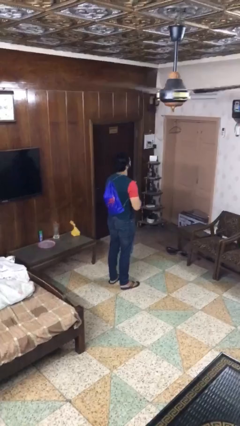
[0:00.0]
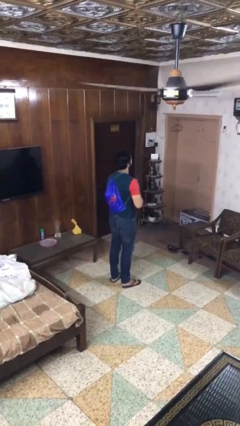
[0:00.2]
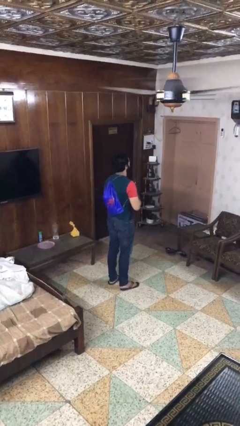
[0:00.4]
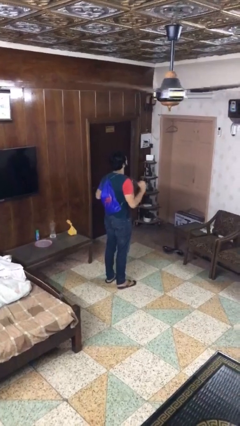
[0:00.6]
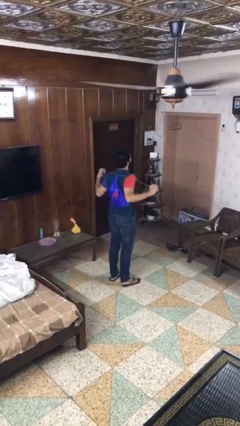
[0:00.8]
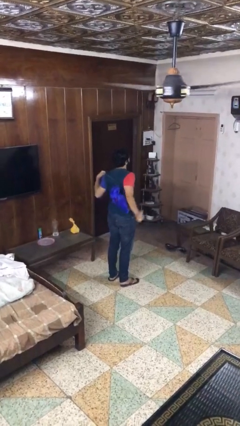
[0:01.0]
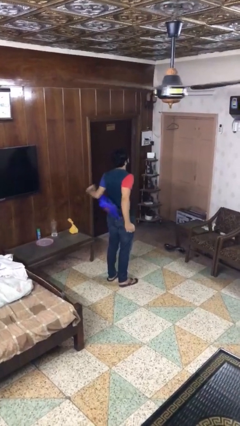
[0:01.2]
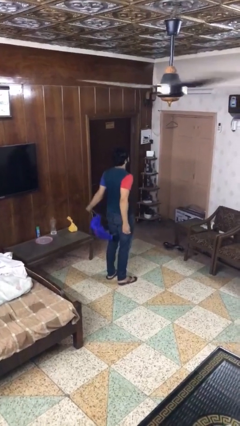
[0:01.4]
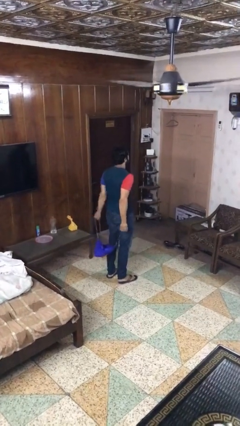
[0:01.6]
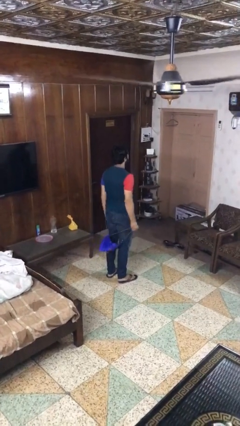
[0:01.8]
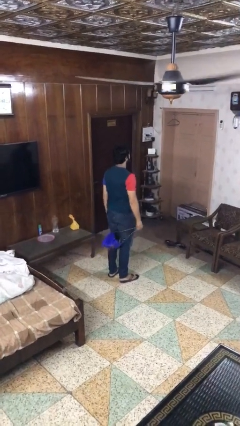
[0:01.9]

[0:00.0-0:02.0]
person takes off backpack

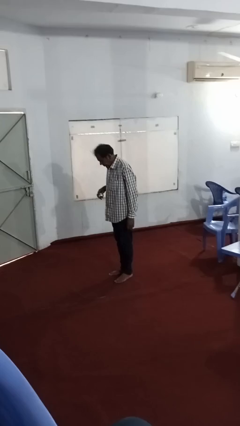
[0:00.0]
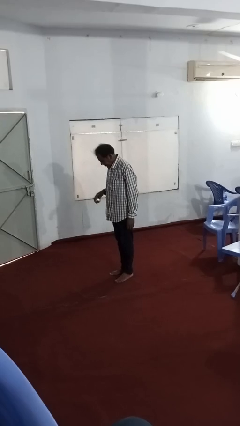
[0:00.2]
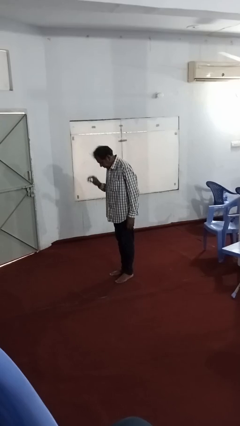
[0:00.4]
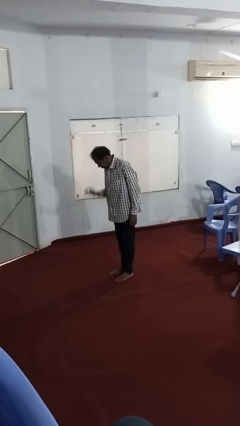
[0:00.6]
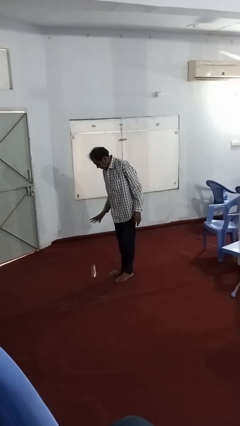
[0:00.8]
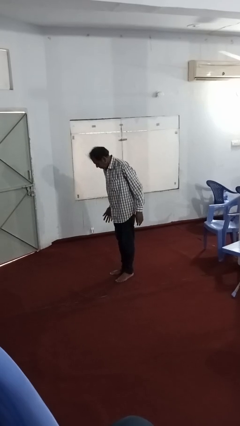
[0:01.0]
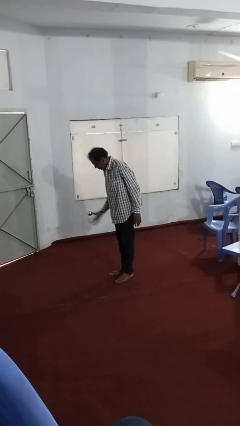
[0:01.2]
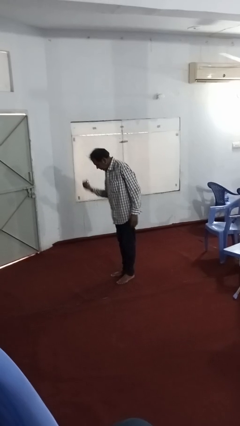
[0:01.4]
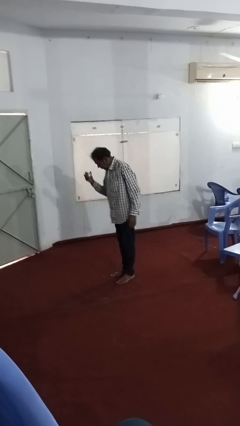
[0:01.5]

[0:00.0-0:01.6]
person bounces ball on floor

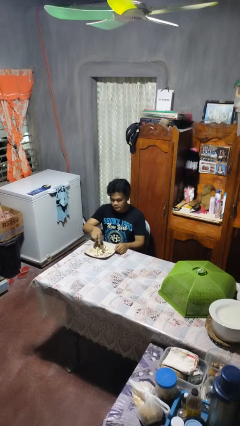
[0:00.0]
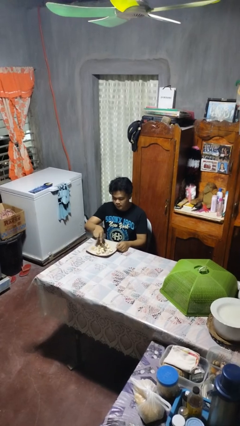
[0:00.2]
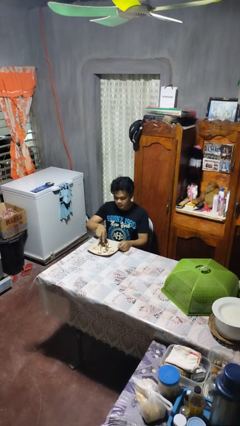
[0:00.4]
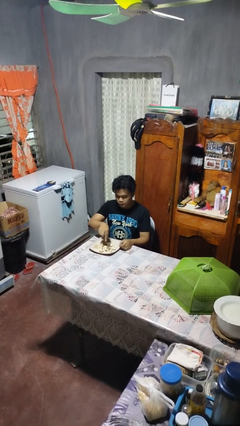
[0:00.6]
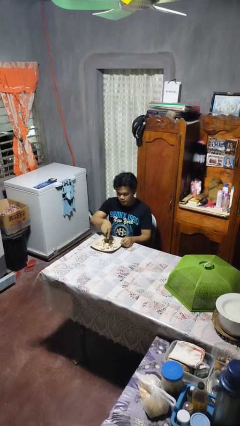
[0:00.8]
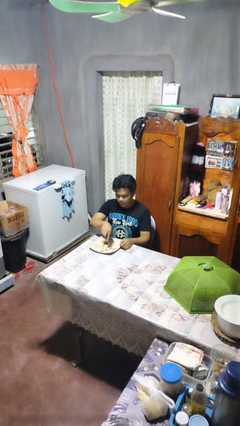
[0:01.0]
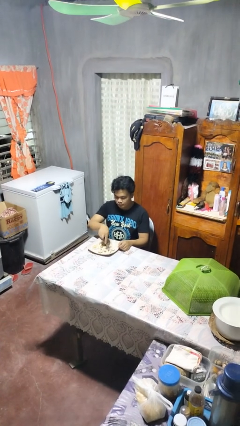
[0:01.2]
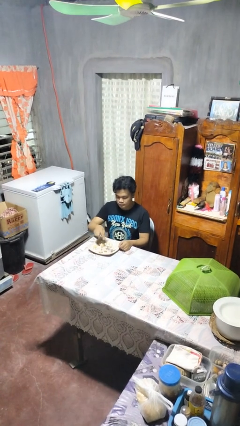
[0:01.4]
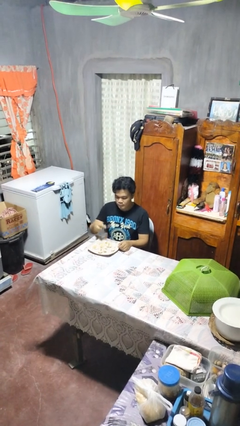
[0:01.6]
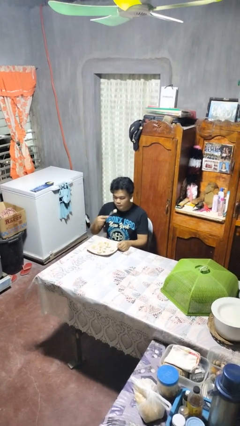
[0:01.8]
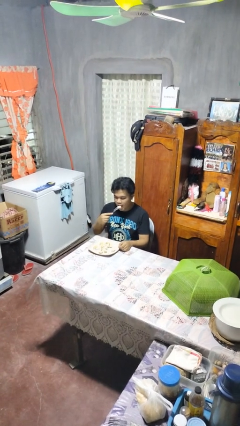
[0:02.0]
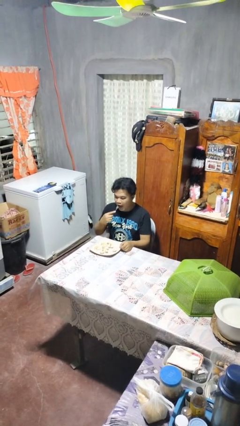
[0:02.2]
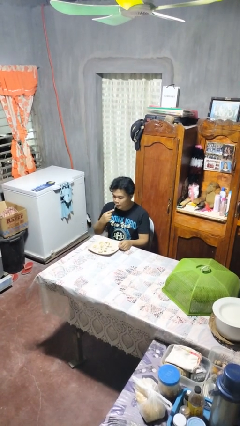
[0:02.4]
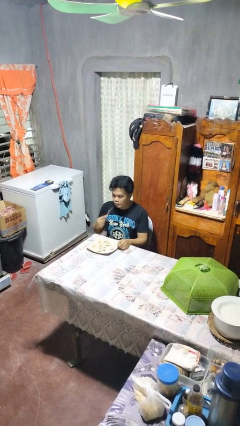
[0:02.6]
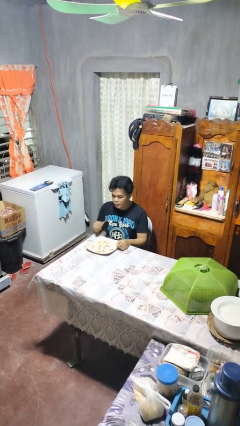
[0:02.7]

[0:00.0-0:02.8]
person eats with utensil

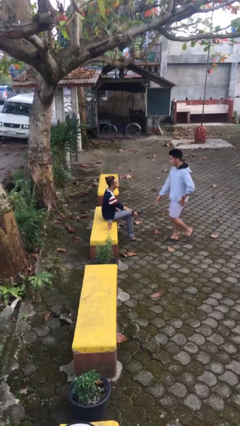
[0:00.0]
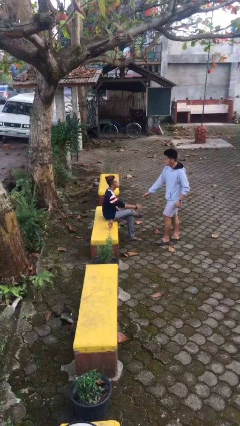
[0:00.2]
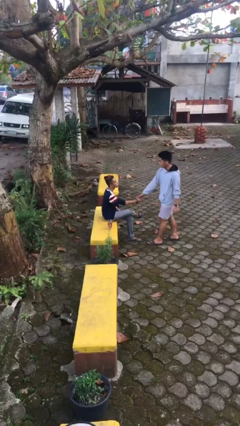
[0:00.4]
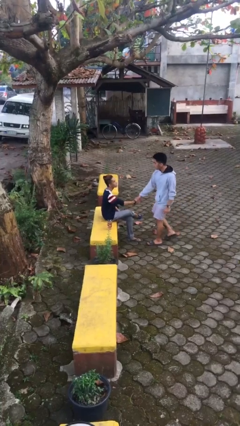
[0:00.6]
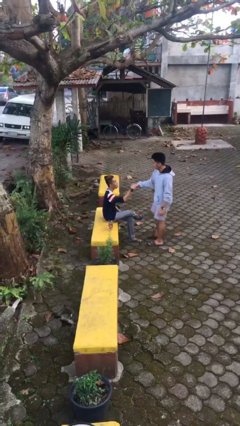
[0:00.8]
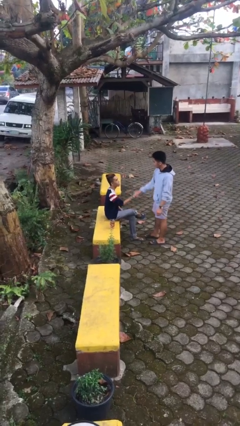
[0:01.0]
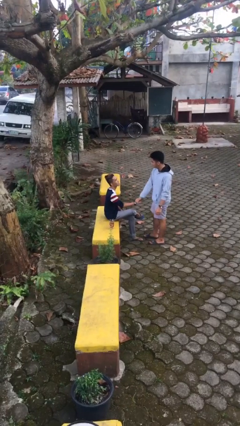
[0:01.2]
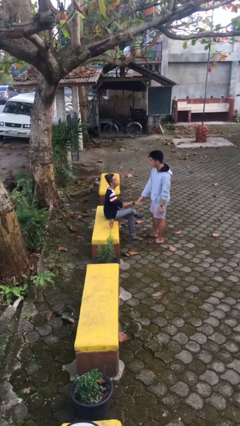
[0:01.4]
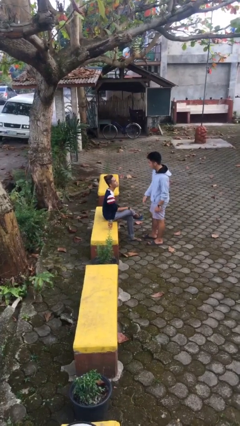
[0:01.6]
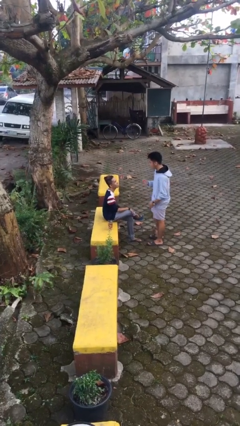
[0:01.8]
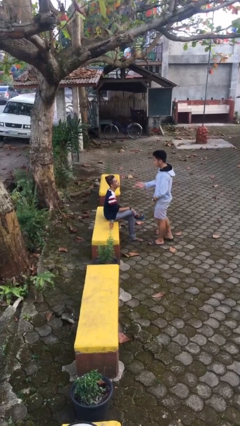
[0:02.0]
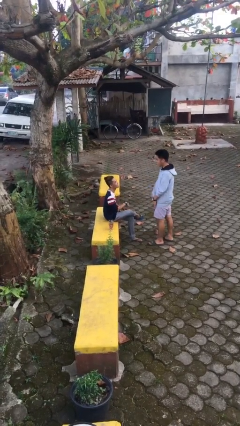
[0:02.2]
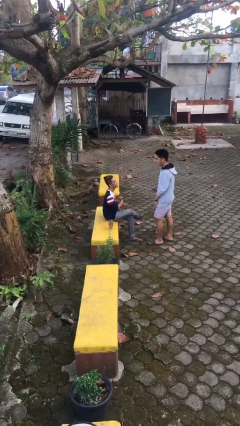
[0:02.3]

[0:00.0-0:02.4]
person shakes hand

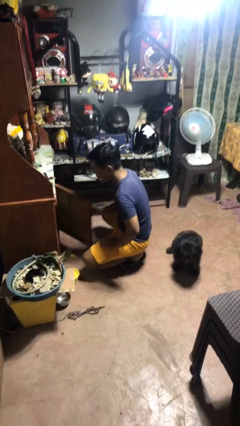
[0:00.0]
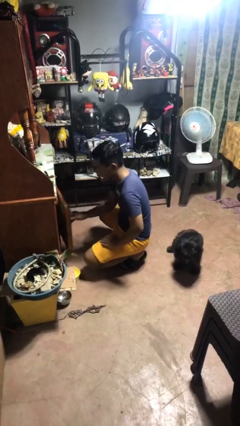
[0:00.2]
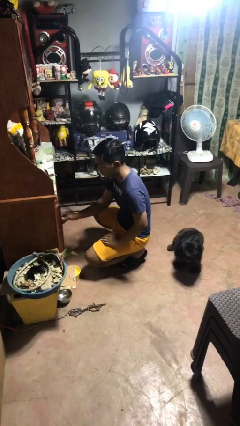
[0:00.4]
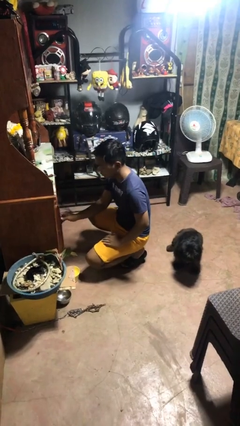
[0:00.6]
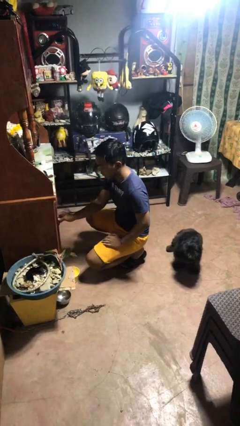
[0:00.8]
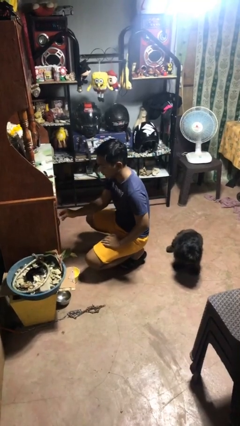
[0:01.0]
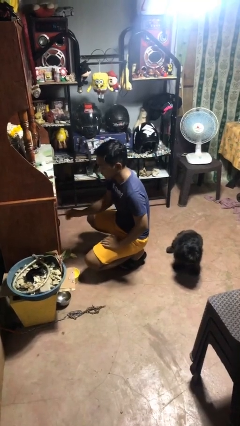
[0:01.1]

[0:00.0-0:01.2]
person closes cabinet

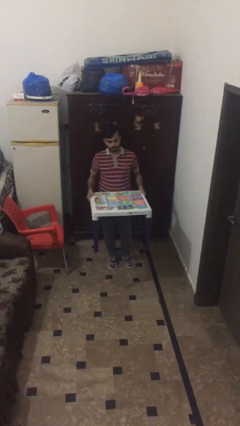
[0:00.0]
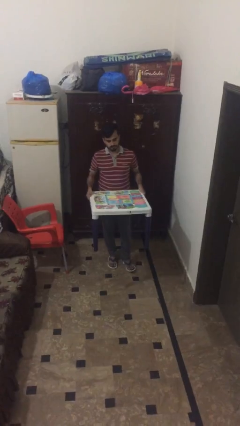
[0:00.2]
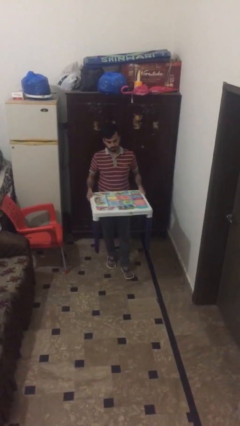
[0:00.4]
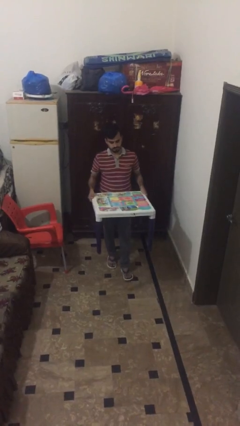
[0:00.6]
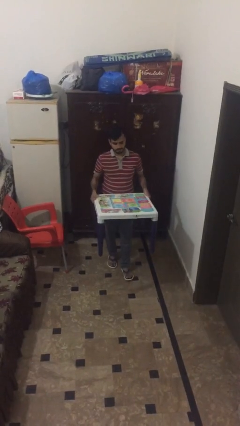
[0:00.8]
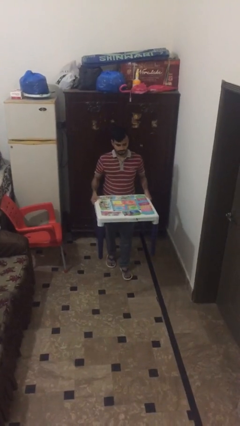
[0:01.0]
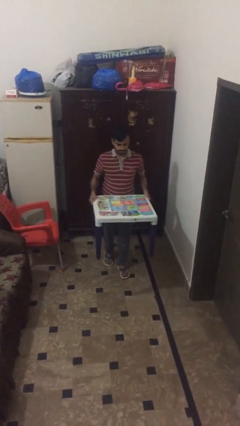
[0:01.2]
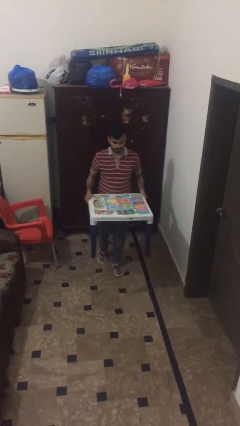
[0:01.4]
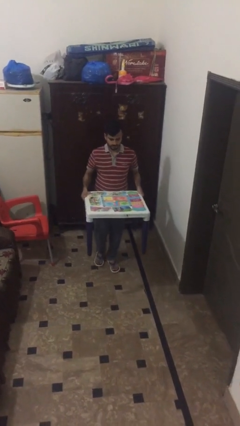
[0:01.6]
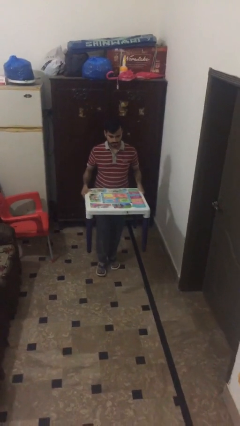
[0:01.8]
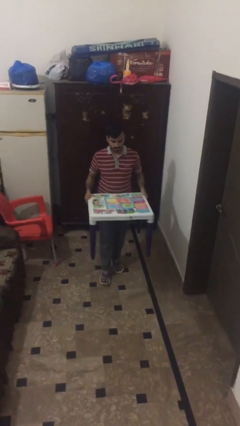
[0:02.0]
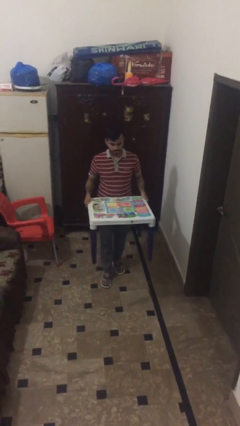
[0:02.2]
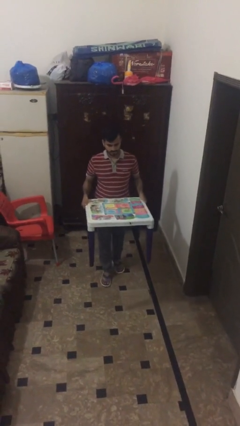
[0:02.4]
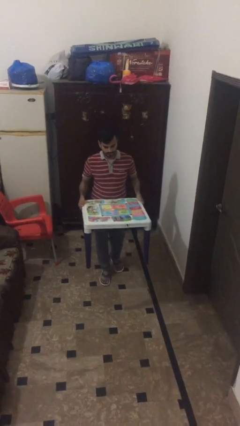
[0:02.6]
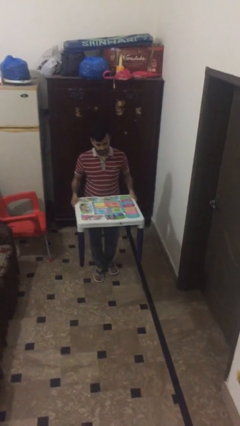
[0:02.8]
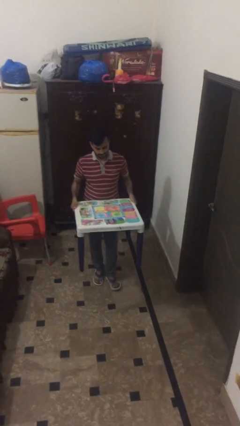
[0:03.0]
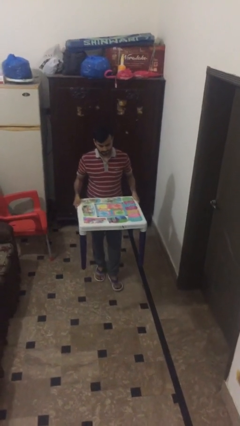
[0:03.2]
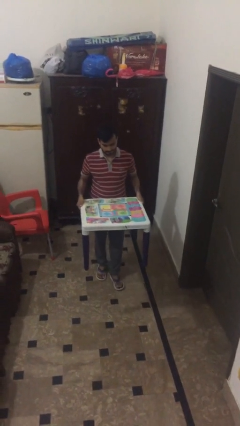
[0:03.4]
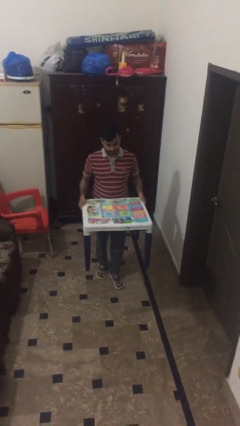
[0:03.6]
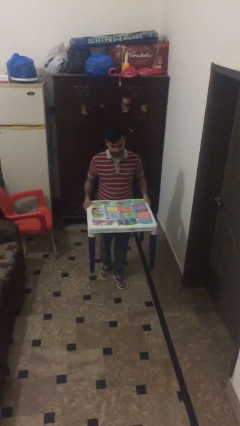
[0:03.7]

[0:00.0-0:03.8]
person carries heavy object

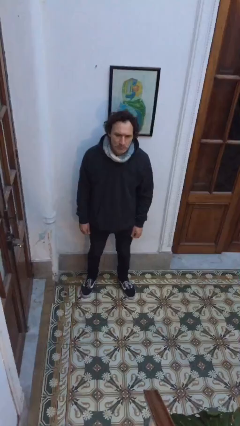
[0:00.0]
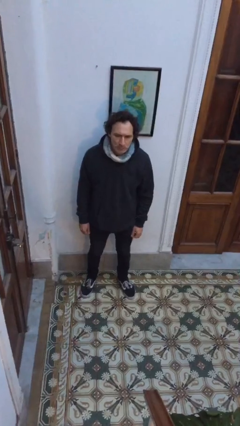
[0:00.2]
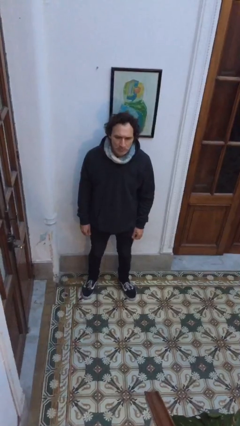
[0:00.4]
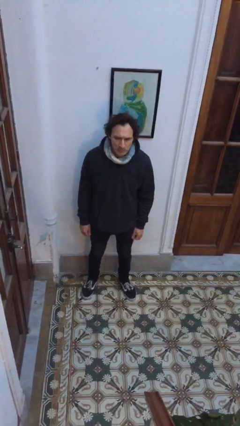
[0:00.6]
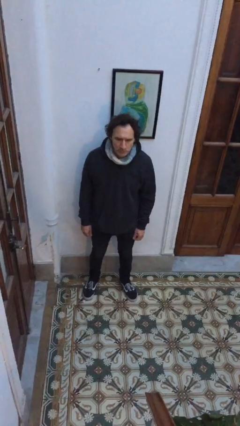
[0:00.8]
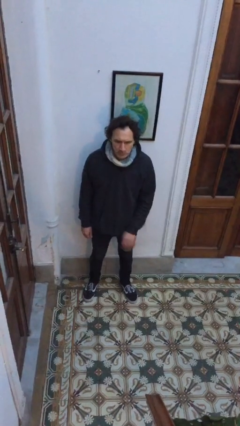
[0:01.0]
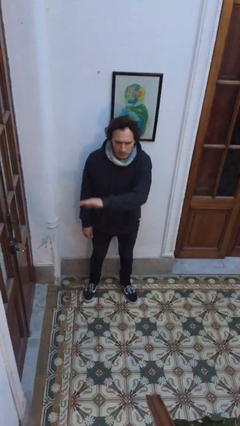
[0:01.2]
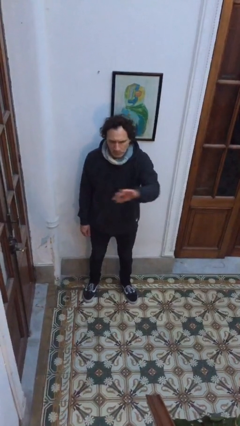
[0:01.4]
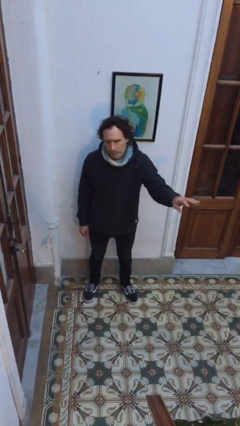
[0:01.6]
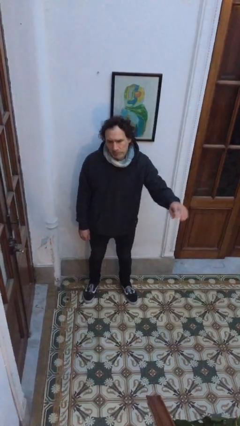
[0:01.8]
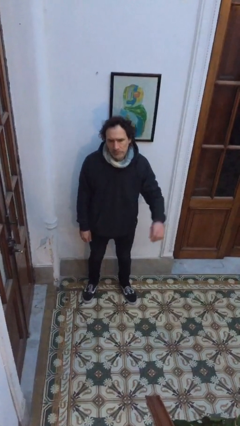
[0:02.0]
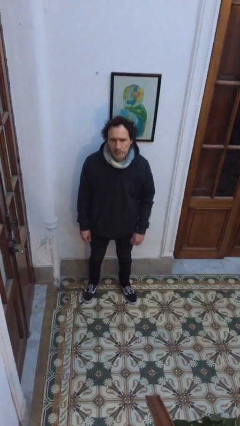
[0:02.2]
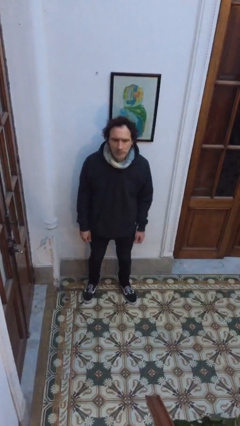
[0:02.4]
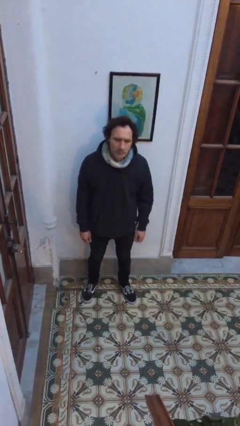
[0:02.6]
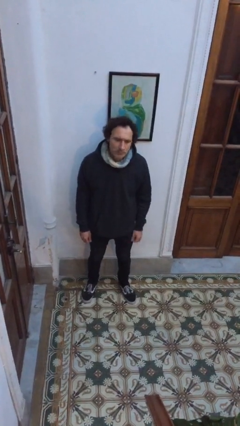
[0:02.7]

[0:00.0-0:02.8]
person gestures swipe left

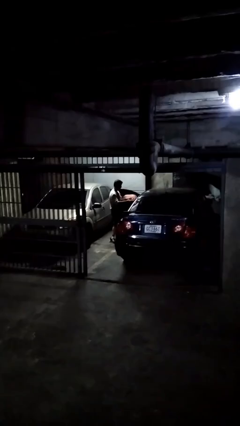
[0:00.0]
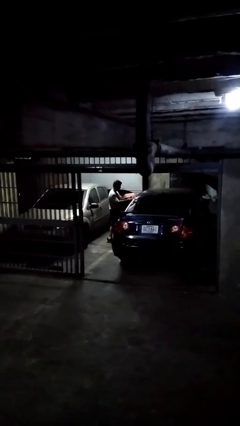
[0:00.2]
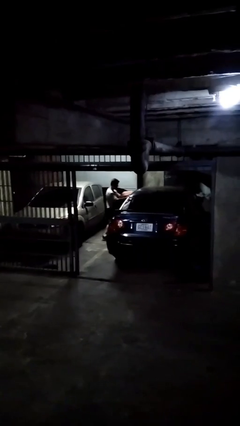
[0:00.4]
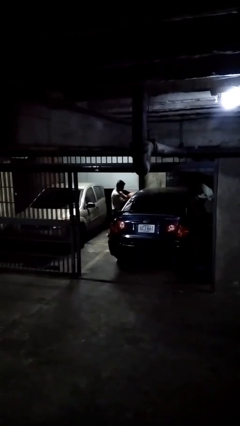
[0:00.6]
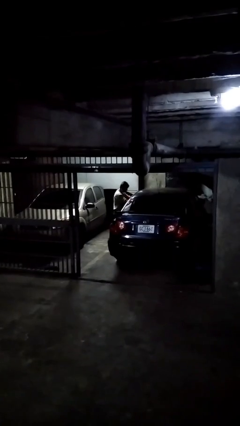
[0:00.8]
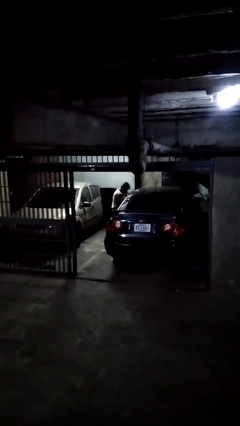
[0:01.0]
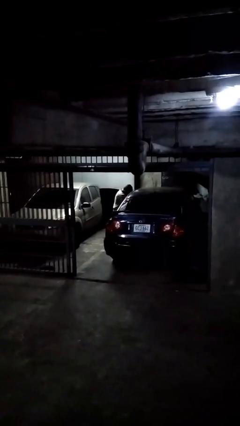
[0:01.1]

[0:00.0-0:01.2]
person loads car
